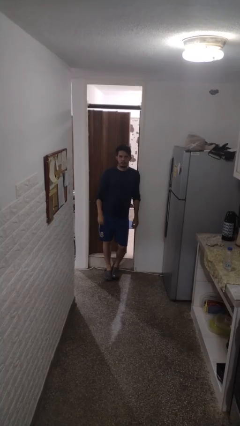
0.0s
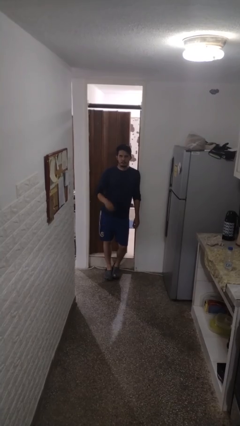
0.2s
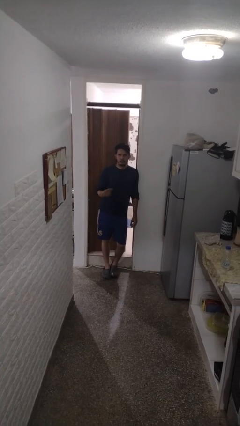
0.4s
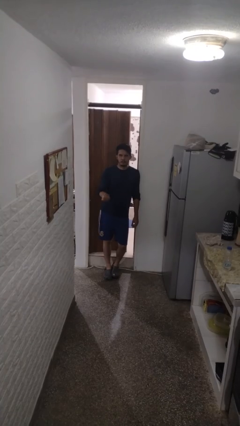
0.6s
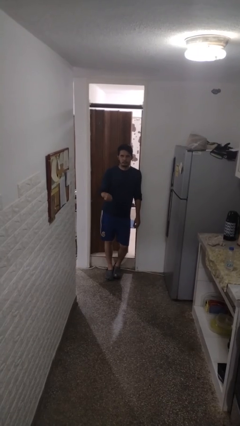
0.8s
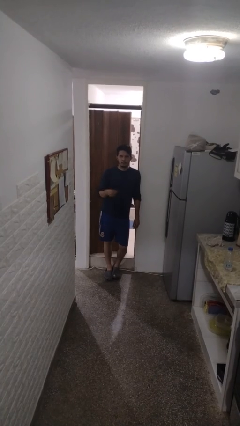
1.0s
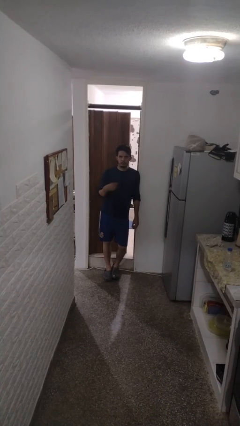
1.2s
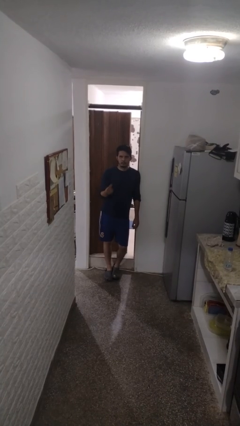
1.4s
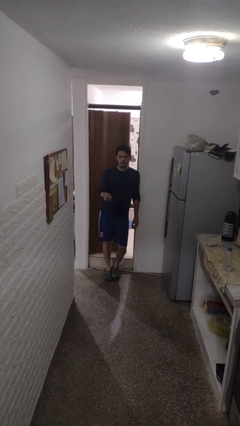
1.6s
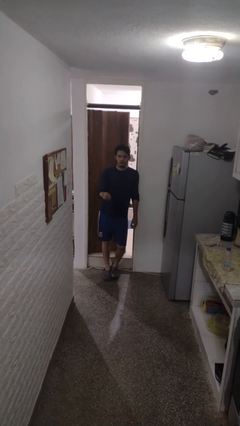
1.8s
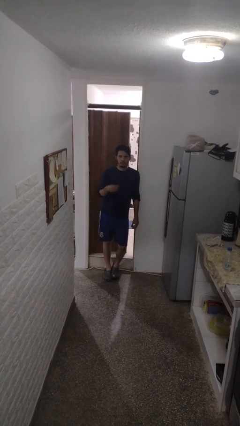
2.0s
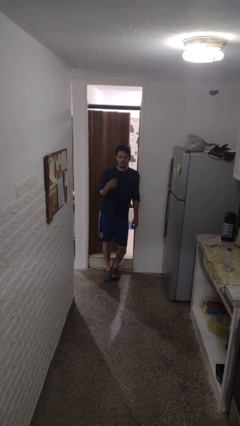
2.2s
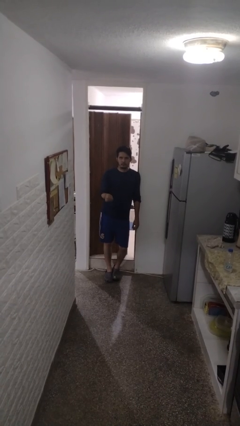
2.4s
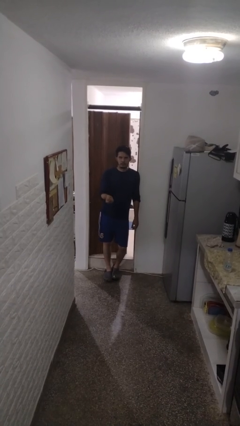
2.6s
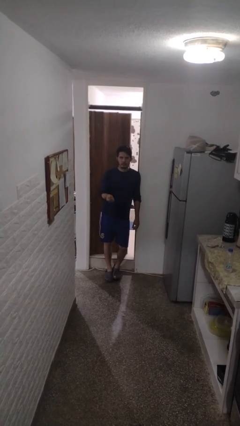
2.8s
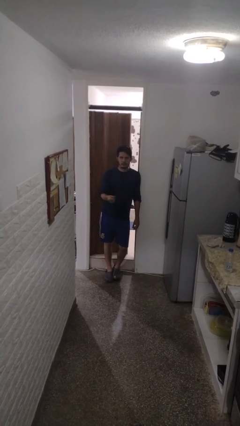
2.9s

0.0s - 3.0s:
person snaps fingers

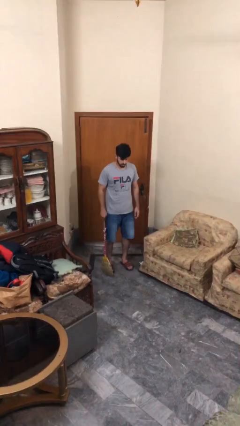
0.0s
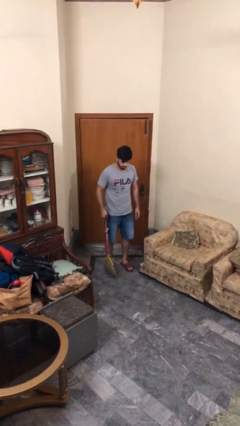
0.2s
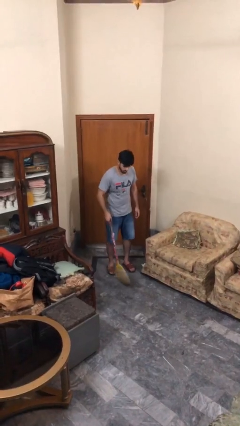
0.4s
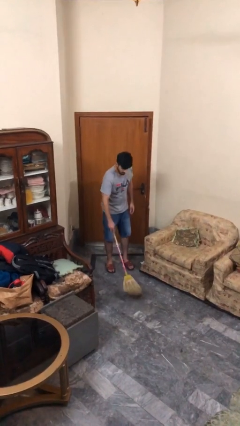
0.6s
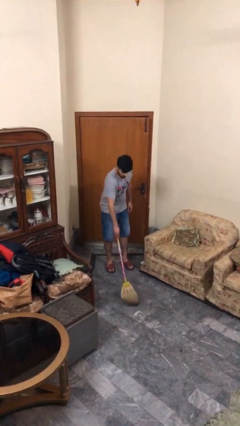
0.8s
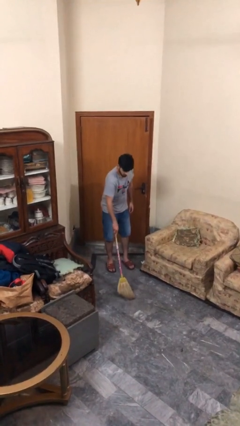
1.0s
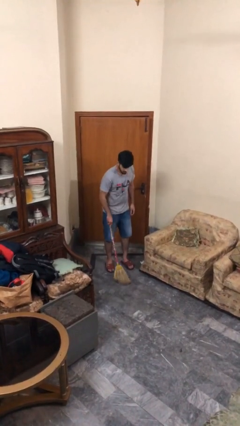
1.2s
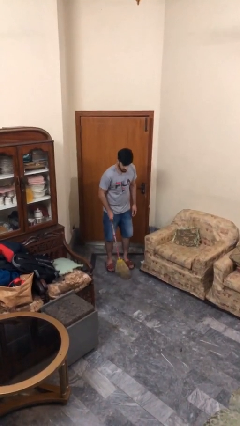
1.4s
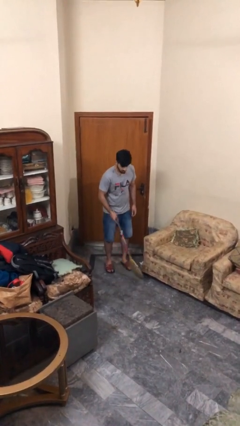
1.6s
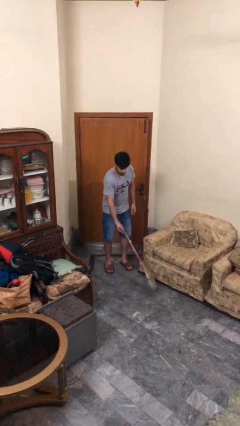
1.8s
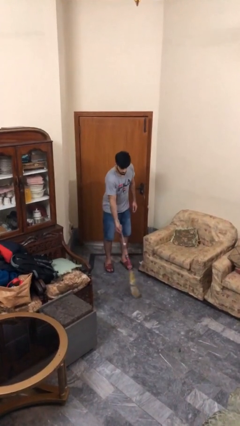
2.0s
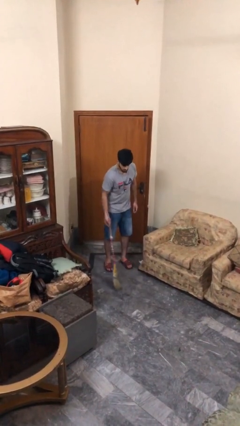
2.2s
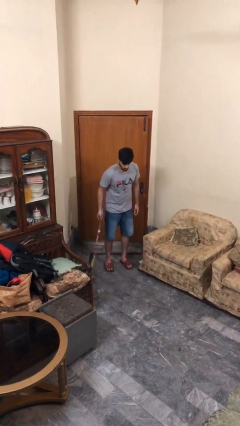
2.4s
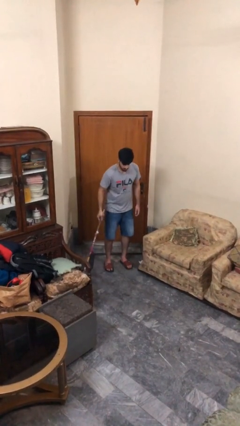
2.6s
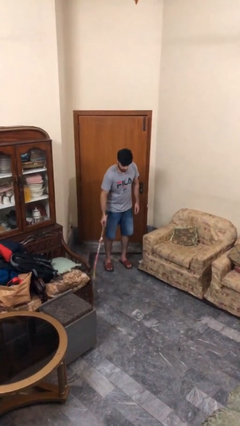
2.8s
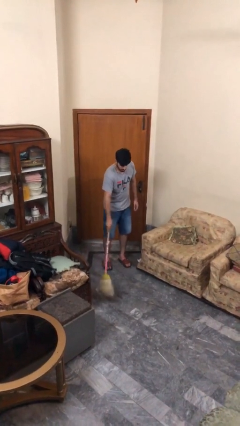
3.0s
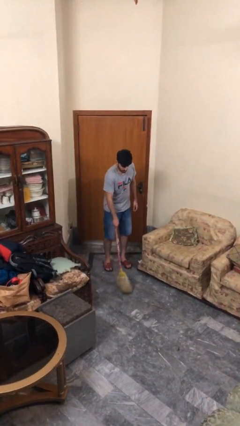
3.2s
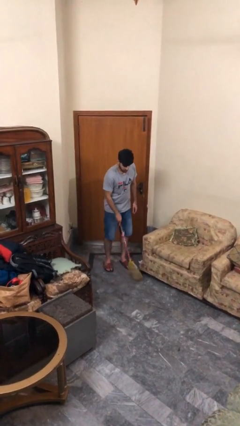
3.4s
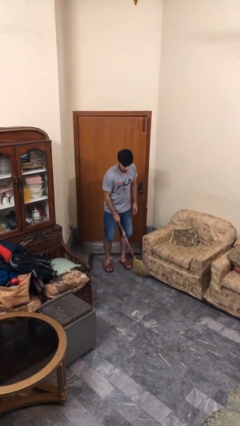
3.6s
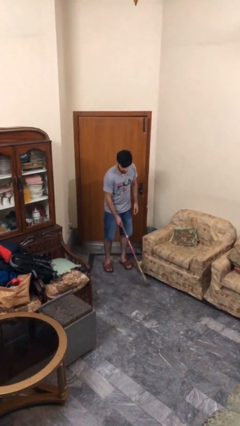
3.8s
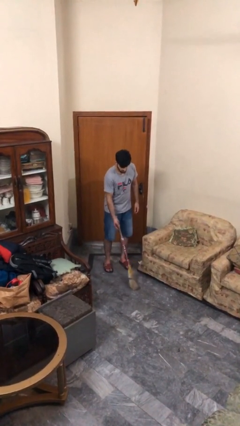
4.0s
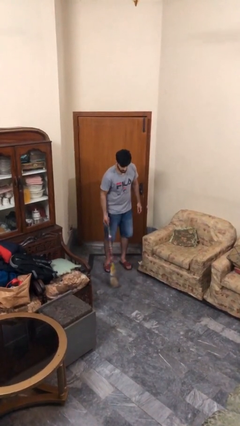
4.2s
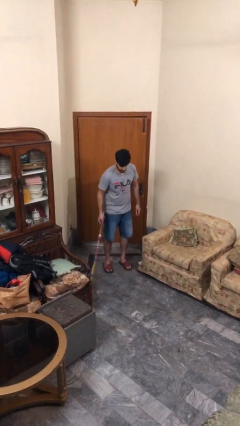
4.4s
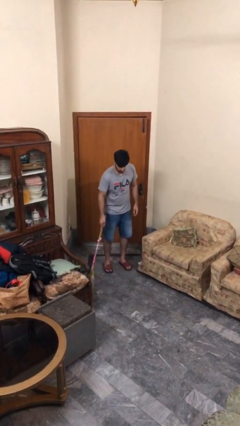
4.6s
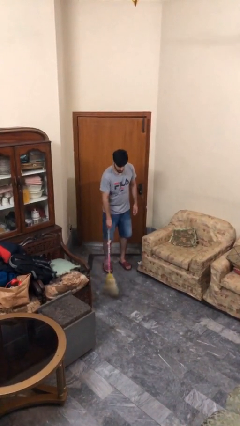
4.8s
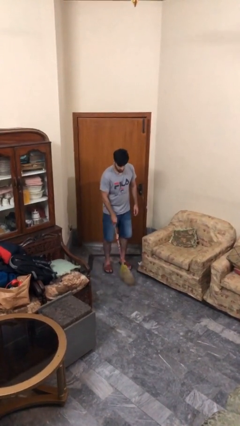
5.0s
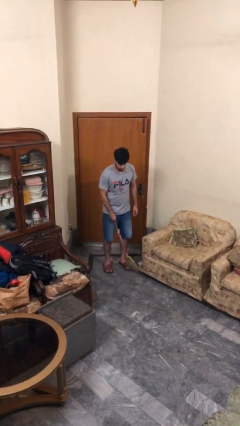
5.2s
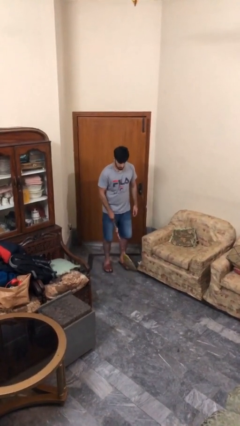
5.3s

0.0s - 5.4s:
person sweeps floor

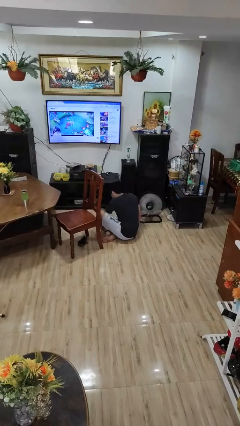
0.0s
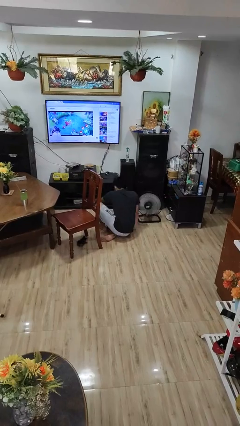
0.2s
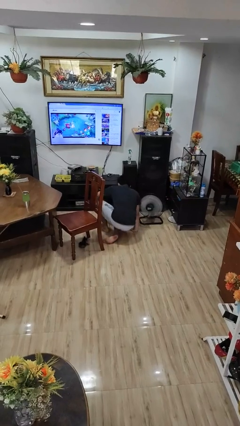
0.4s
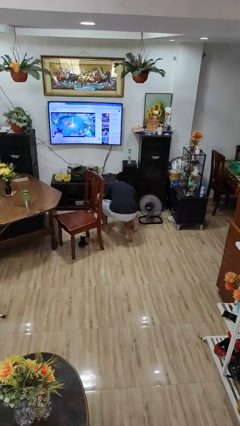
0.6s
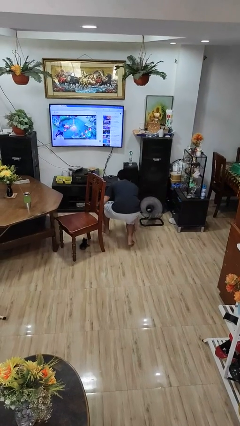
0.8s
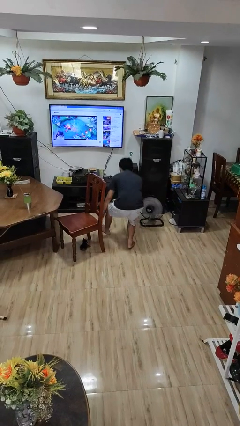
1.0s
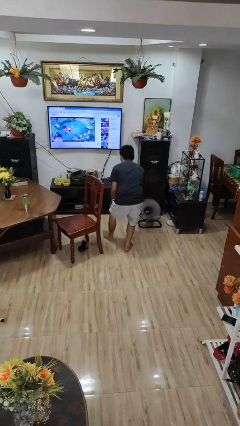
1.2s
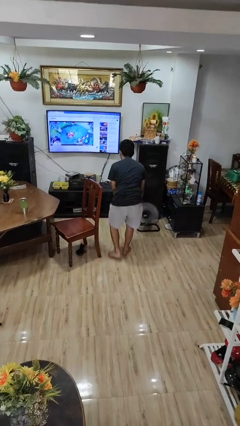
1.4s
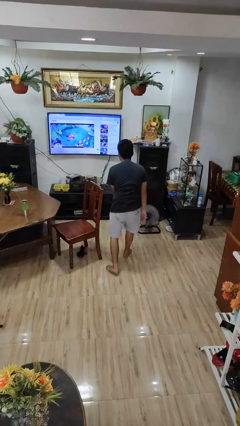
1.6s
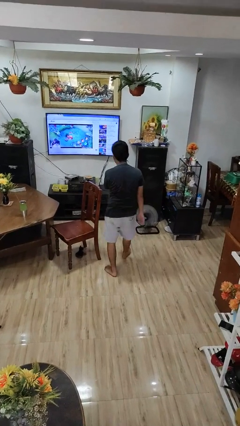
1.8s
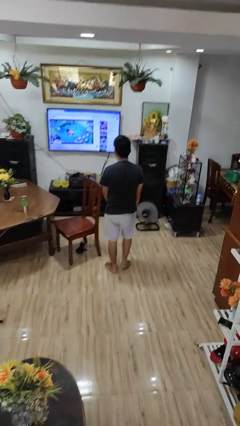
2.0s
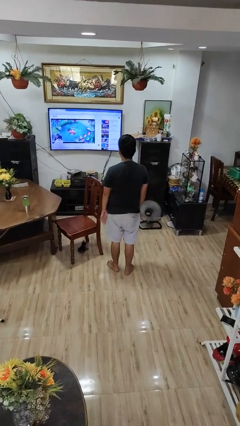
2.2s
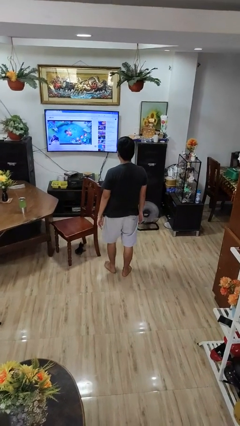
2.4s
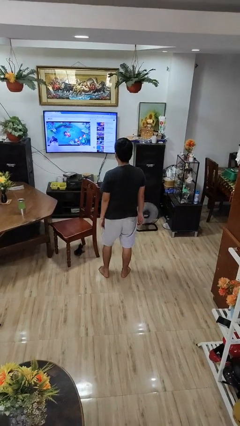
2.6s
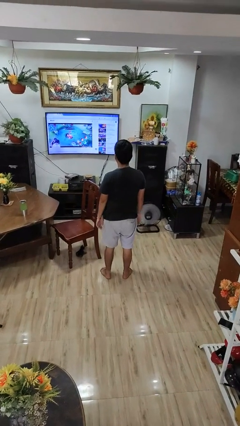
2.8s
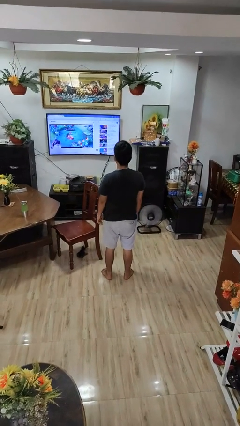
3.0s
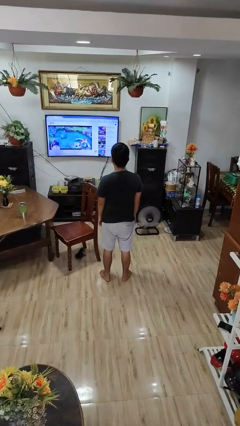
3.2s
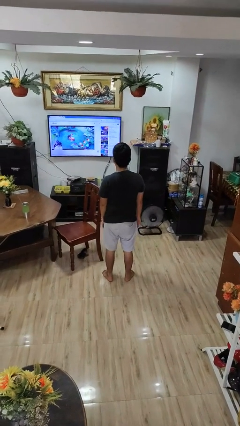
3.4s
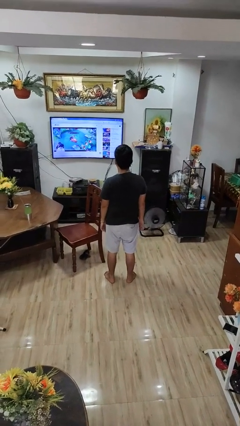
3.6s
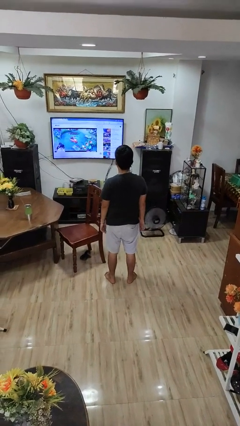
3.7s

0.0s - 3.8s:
person stands up from floor

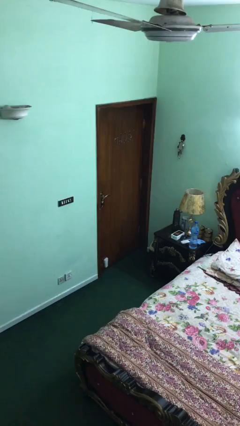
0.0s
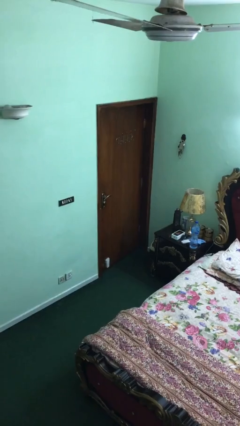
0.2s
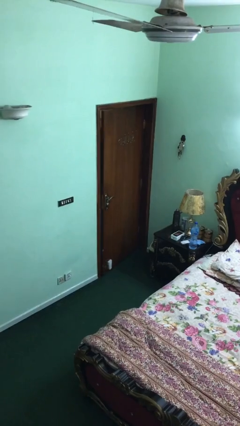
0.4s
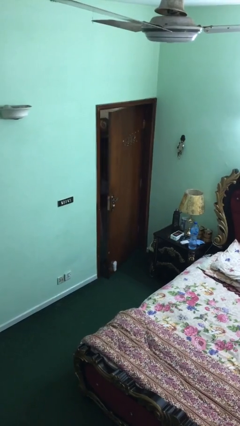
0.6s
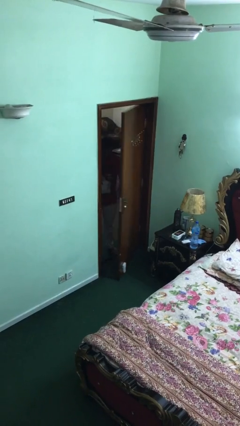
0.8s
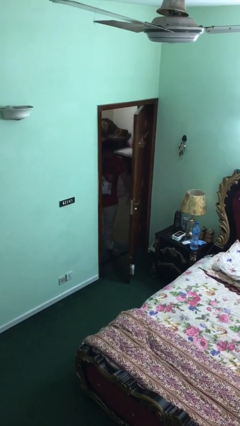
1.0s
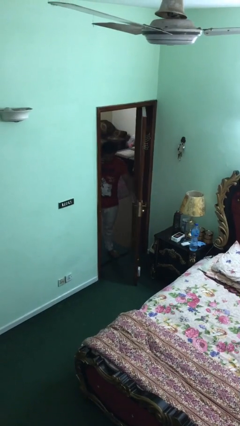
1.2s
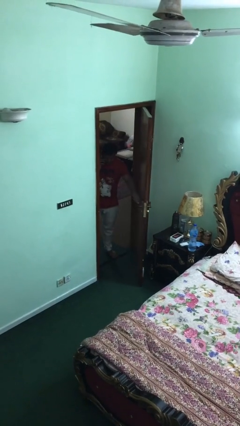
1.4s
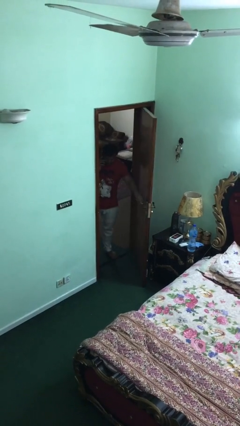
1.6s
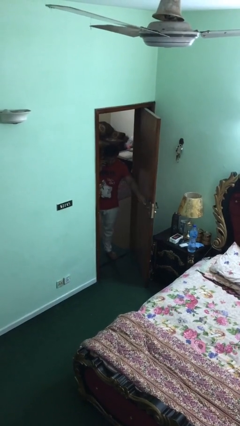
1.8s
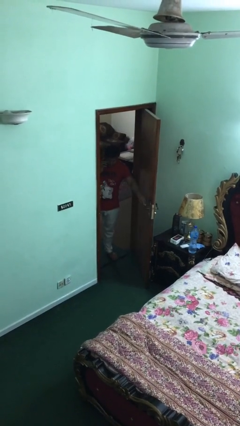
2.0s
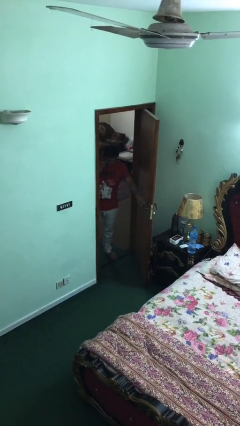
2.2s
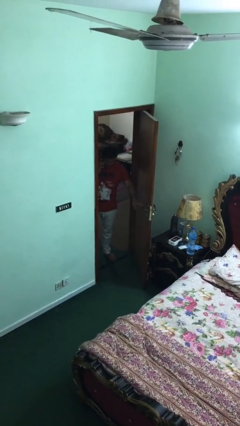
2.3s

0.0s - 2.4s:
person opens facility door

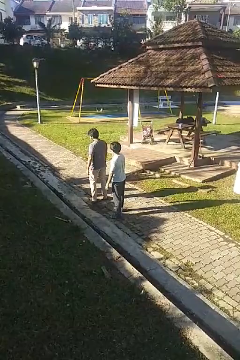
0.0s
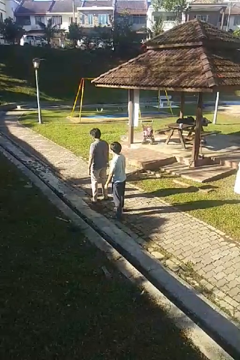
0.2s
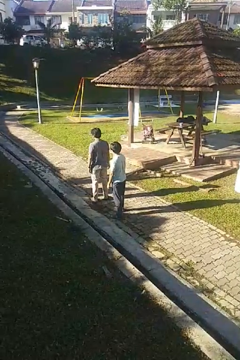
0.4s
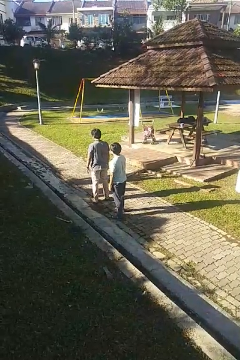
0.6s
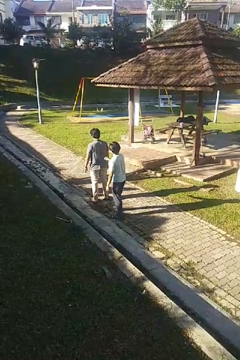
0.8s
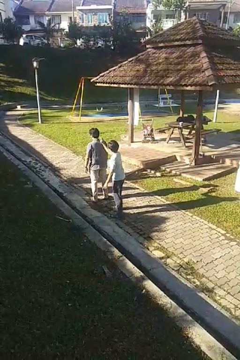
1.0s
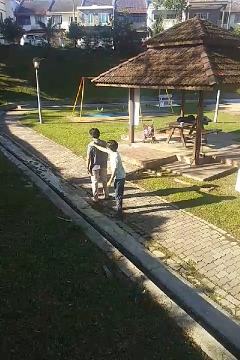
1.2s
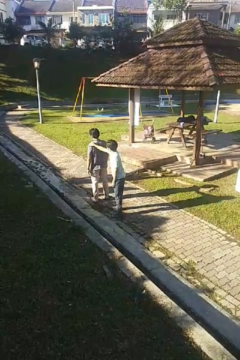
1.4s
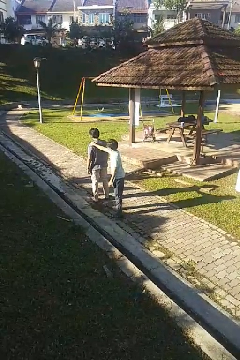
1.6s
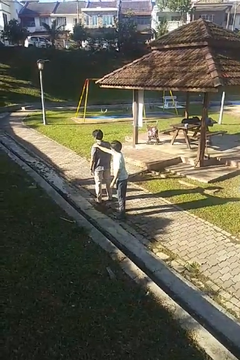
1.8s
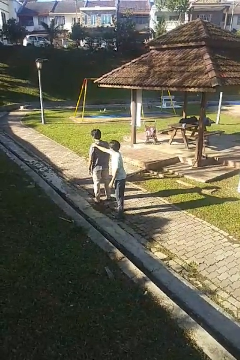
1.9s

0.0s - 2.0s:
person grabs person by shoulder

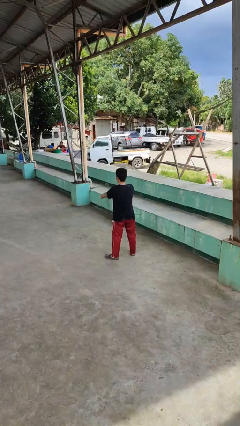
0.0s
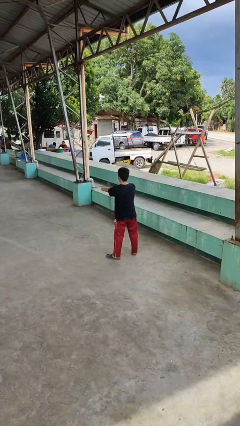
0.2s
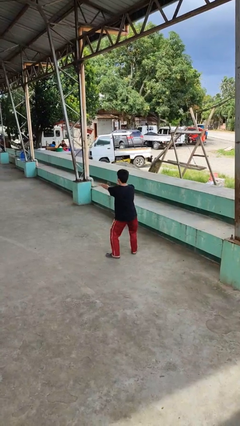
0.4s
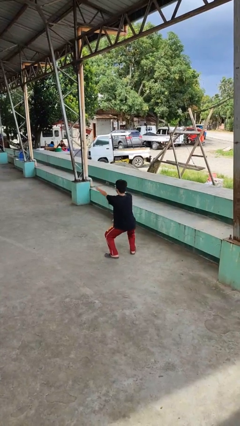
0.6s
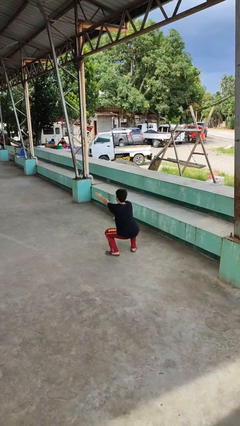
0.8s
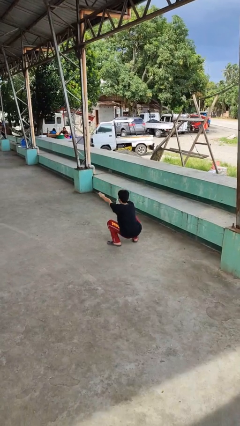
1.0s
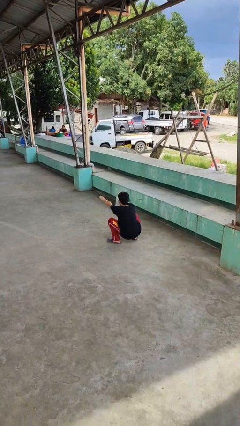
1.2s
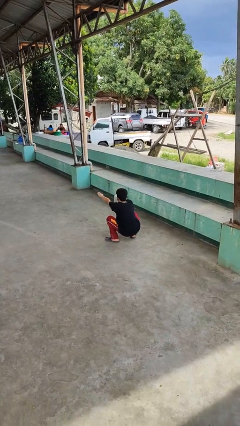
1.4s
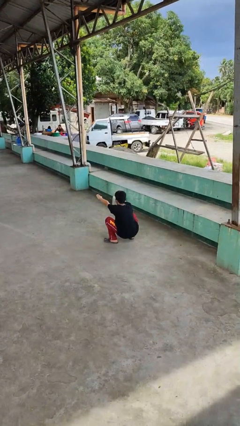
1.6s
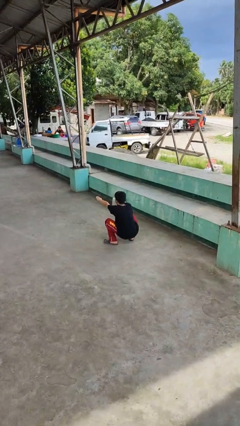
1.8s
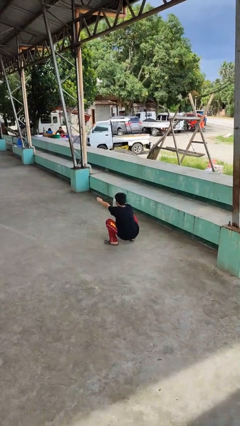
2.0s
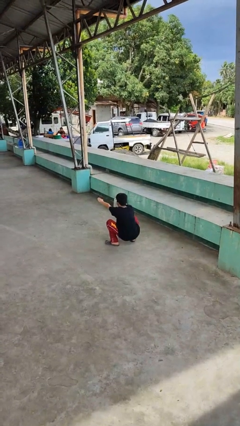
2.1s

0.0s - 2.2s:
person squats
